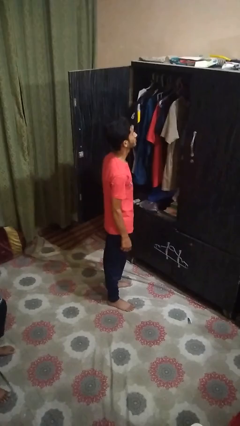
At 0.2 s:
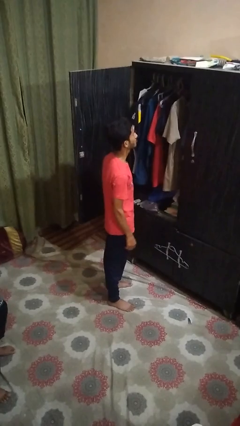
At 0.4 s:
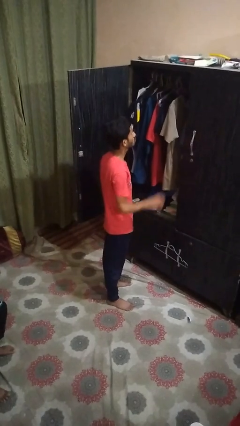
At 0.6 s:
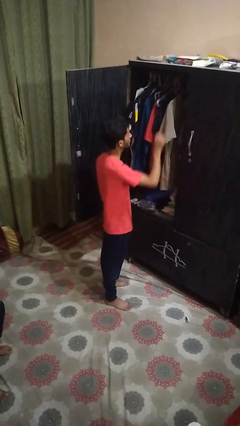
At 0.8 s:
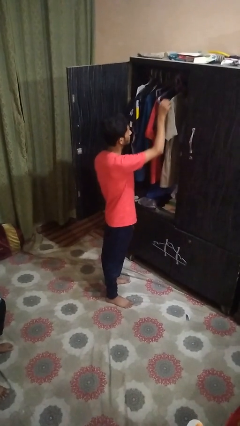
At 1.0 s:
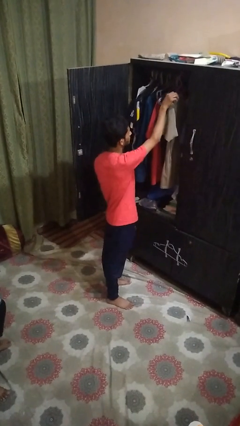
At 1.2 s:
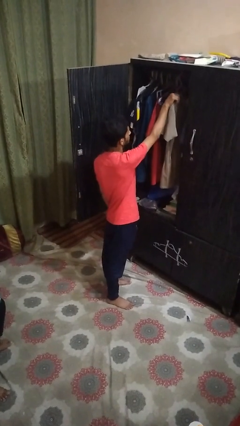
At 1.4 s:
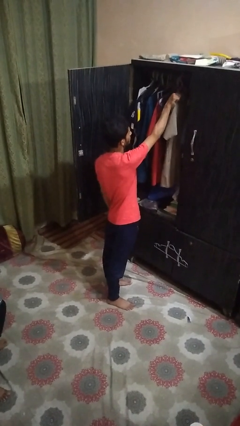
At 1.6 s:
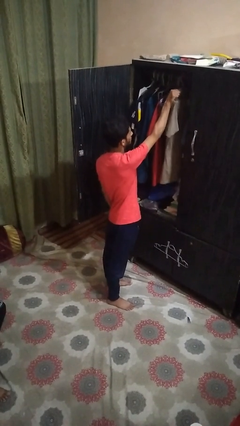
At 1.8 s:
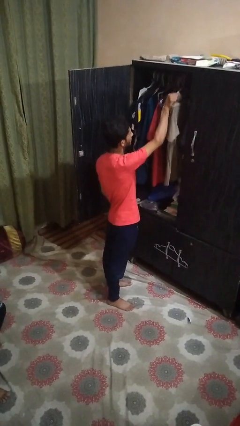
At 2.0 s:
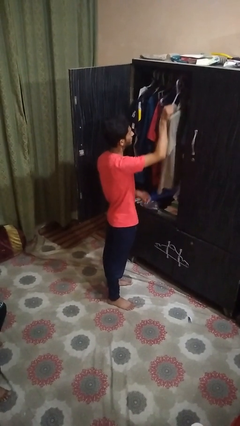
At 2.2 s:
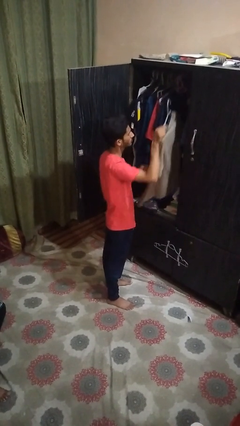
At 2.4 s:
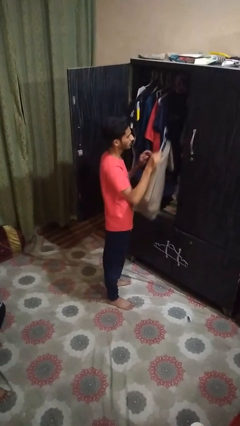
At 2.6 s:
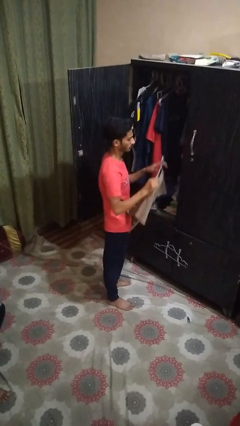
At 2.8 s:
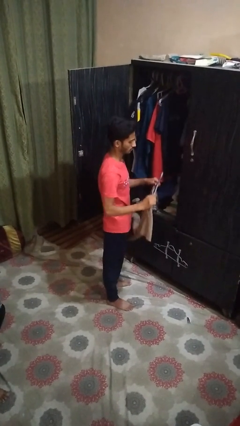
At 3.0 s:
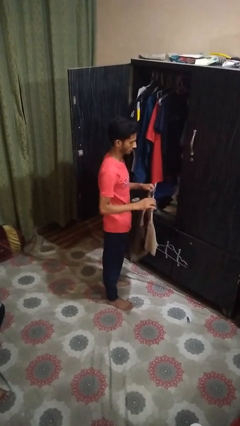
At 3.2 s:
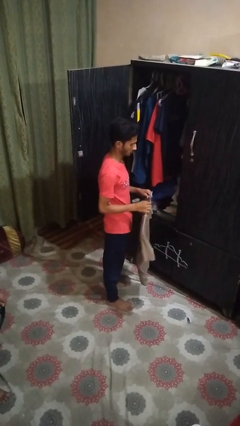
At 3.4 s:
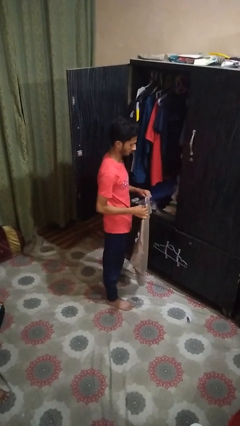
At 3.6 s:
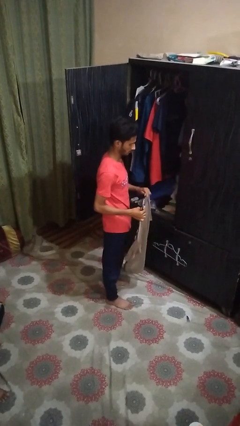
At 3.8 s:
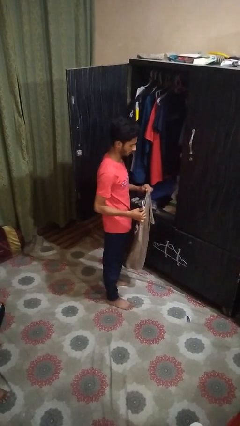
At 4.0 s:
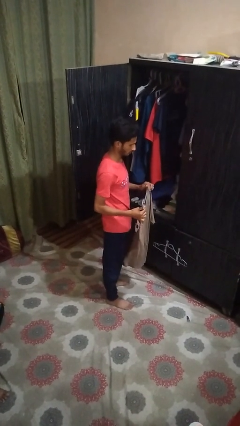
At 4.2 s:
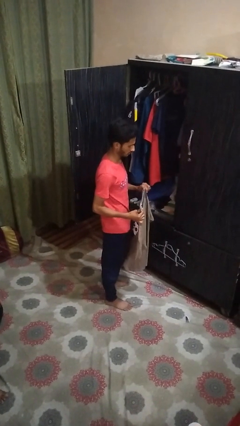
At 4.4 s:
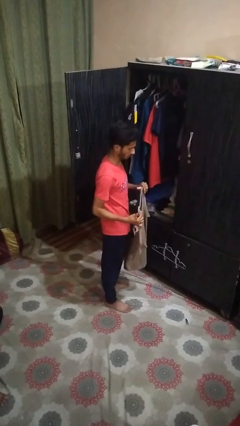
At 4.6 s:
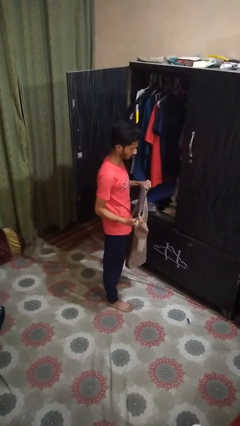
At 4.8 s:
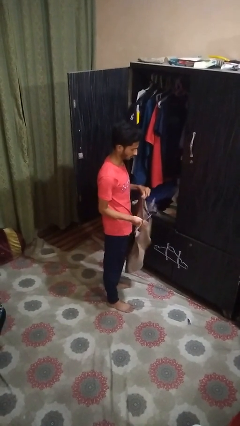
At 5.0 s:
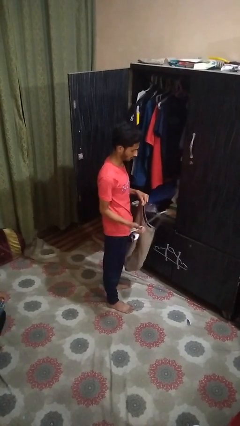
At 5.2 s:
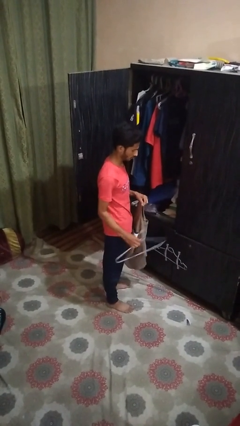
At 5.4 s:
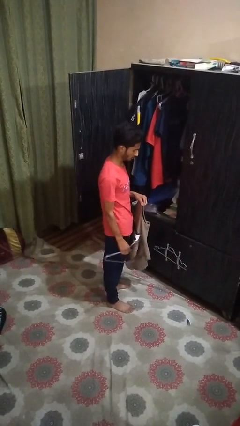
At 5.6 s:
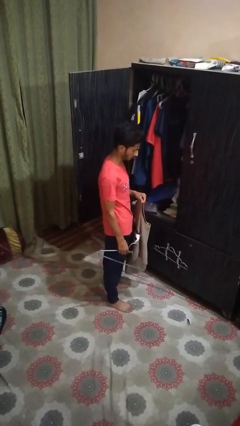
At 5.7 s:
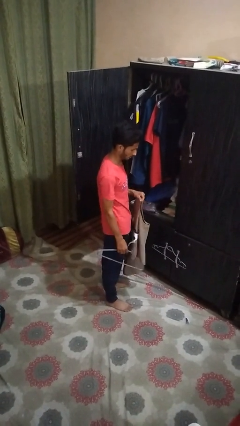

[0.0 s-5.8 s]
person takes clothes from closet

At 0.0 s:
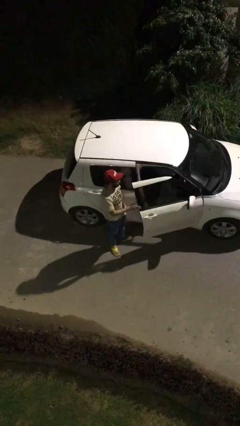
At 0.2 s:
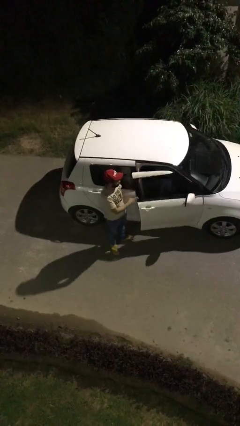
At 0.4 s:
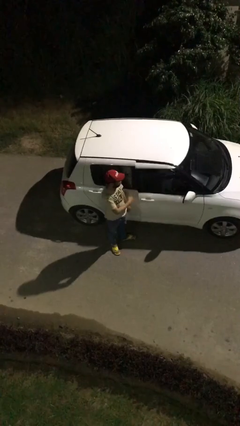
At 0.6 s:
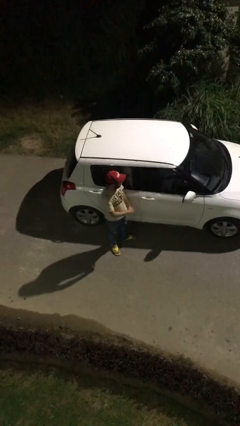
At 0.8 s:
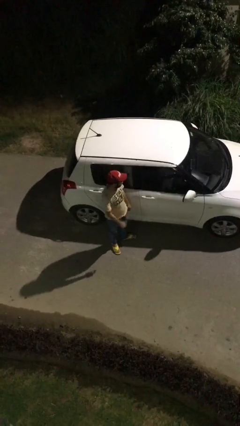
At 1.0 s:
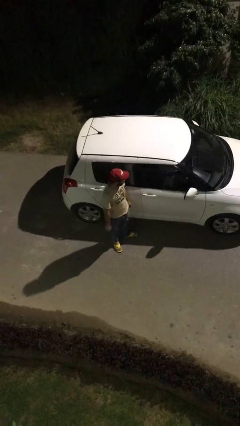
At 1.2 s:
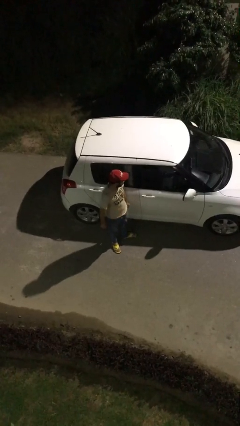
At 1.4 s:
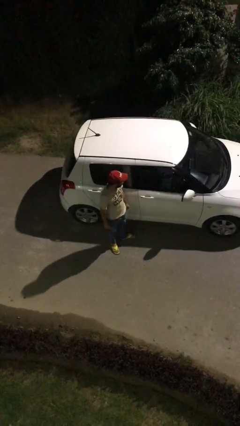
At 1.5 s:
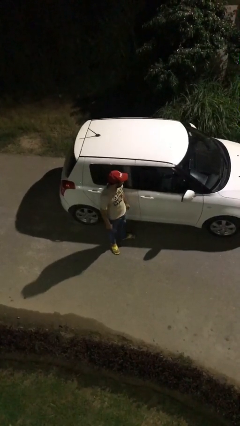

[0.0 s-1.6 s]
person closes car door

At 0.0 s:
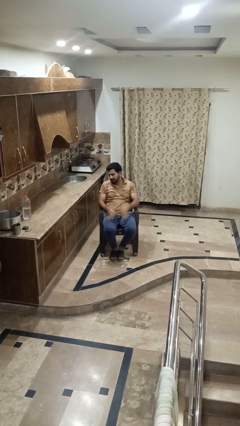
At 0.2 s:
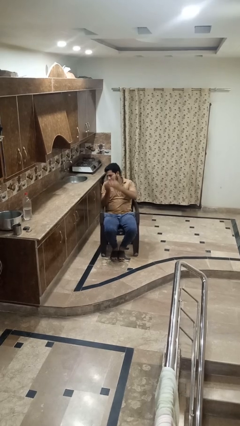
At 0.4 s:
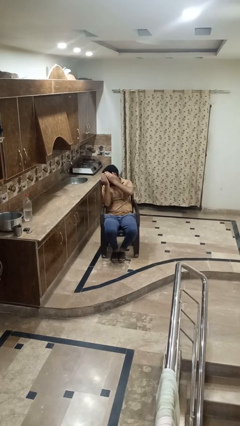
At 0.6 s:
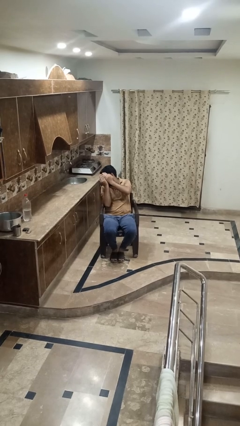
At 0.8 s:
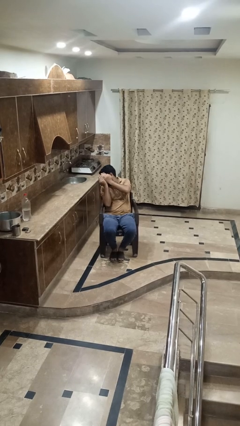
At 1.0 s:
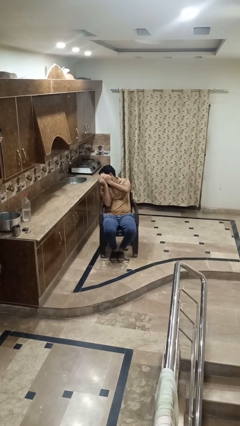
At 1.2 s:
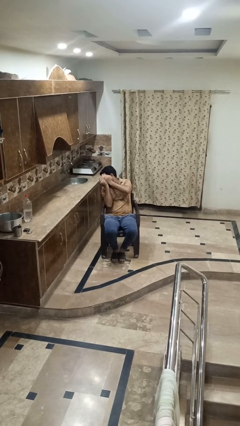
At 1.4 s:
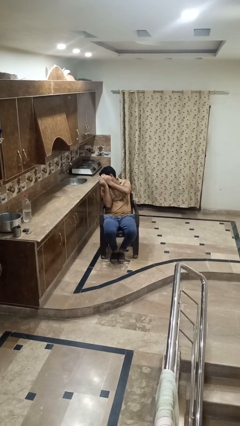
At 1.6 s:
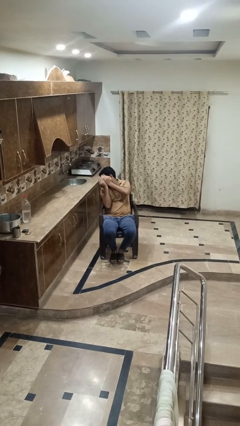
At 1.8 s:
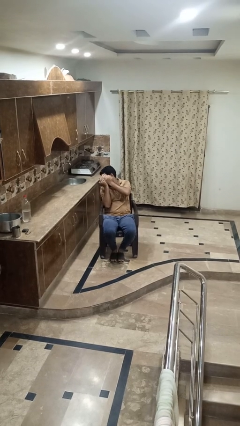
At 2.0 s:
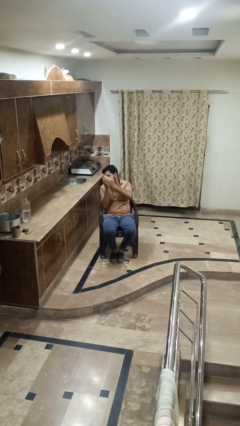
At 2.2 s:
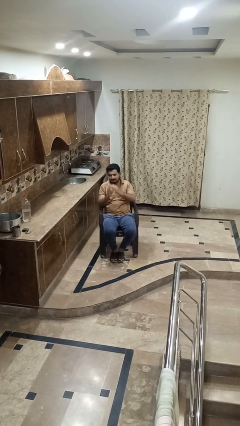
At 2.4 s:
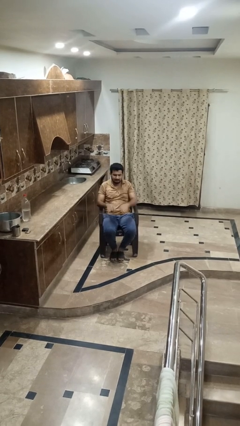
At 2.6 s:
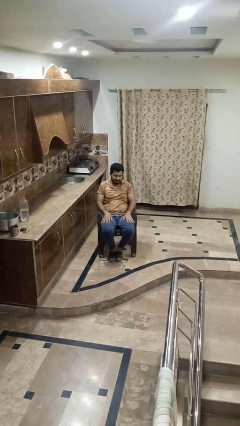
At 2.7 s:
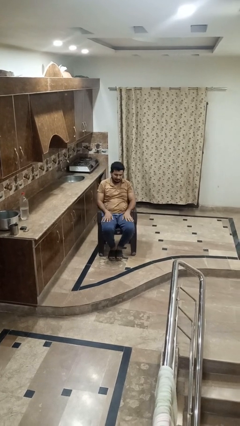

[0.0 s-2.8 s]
person covers face with hands

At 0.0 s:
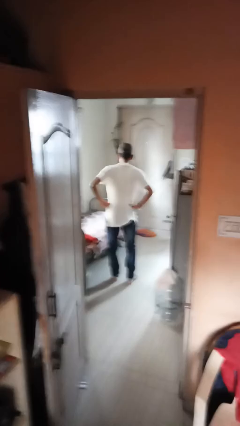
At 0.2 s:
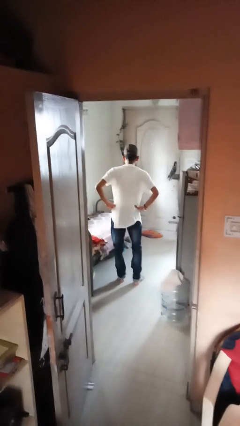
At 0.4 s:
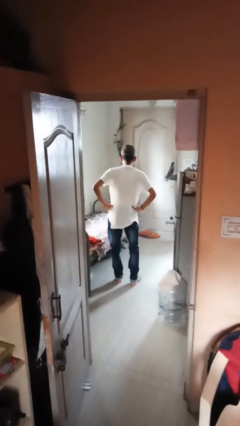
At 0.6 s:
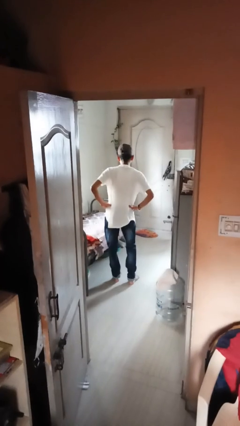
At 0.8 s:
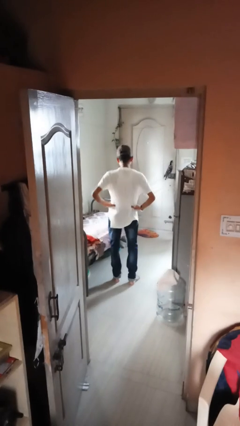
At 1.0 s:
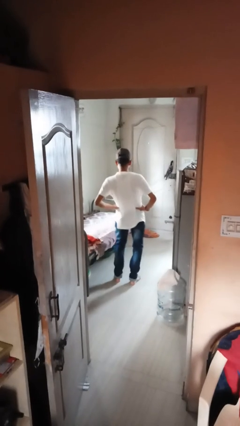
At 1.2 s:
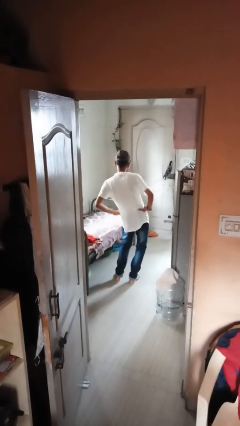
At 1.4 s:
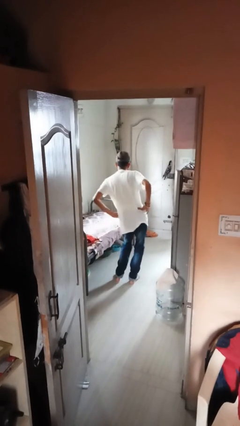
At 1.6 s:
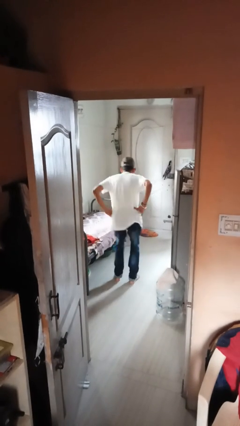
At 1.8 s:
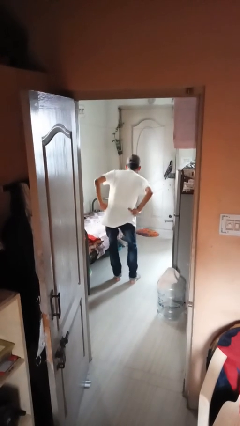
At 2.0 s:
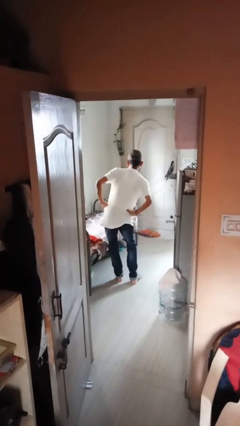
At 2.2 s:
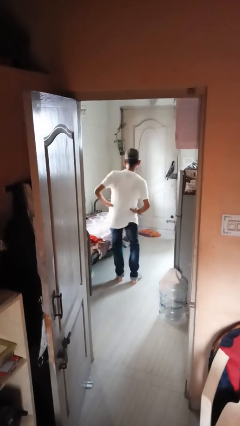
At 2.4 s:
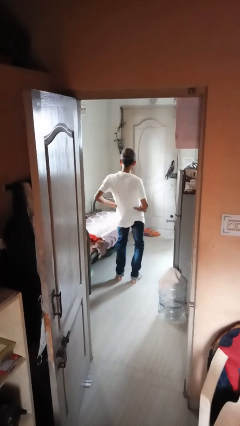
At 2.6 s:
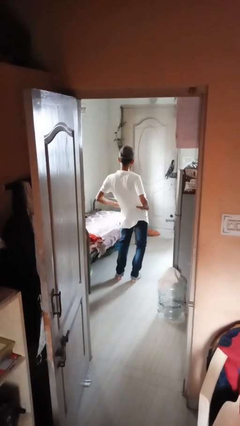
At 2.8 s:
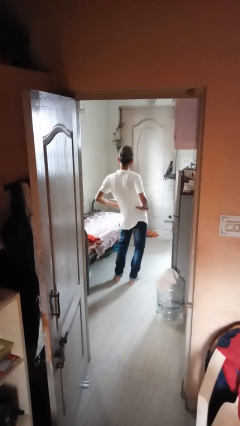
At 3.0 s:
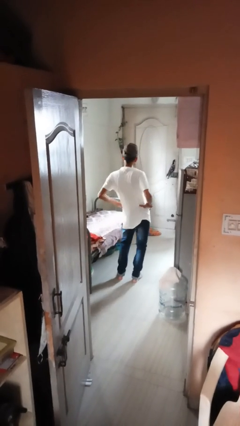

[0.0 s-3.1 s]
person wiggles hips

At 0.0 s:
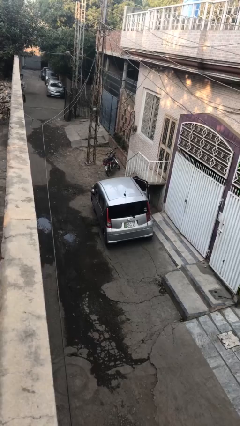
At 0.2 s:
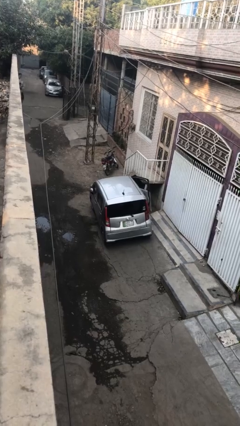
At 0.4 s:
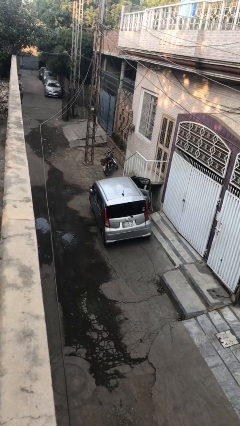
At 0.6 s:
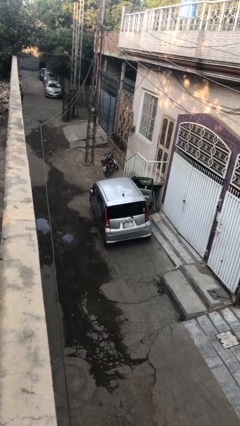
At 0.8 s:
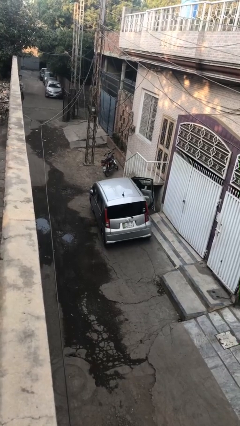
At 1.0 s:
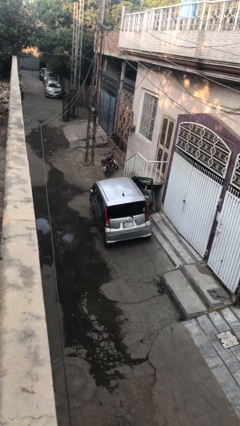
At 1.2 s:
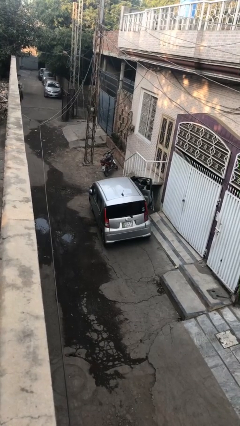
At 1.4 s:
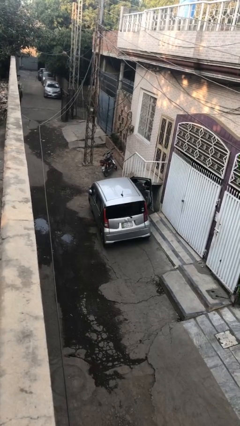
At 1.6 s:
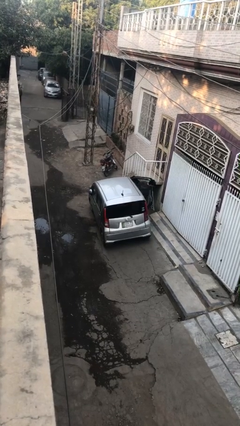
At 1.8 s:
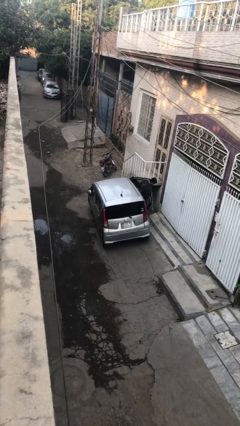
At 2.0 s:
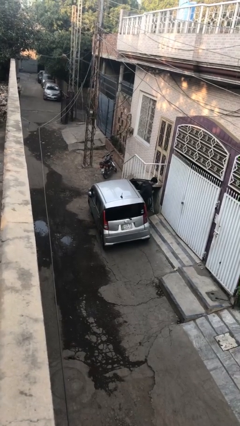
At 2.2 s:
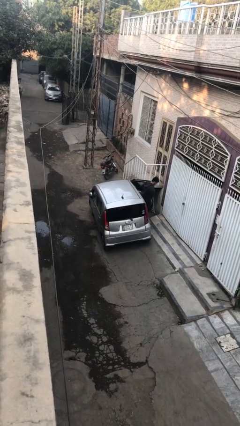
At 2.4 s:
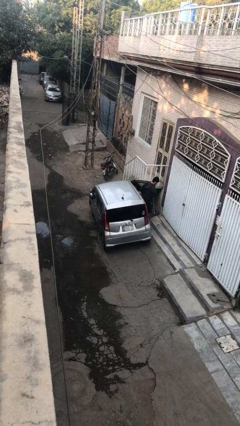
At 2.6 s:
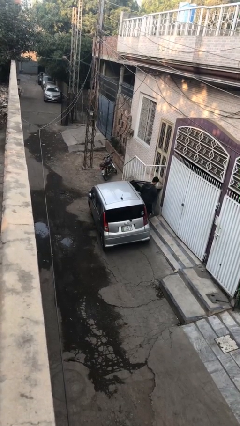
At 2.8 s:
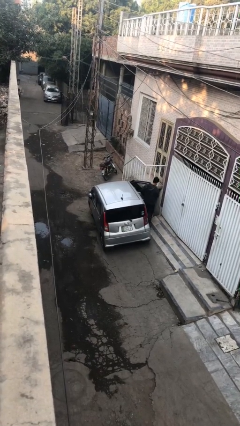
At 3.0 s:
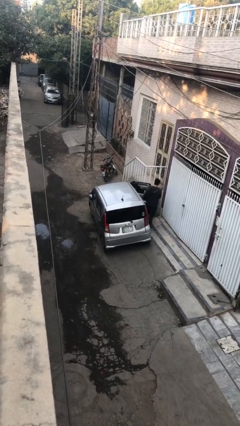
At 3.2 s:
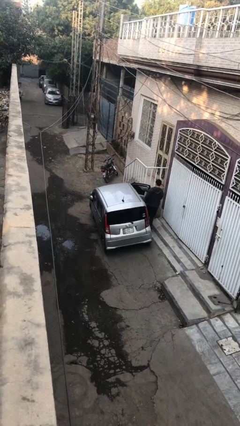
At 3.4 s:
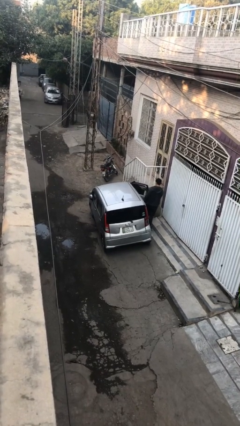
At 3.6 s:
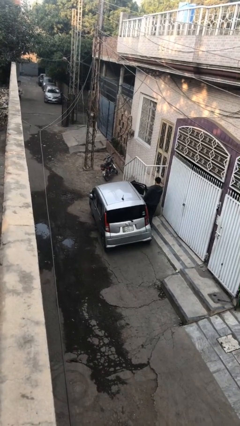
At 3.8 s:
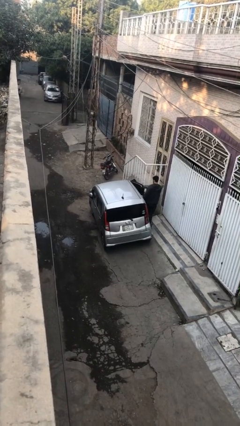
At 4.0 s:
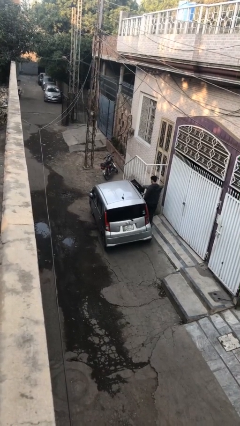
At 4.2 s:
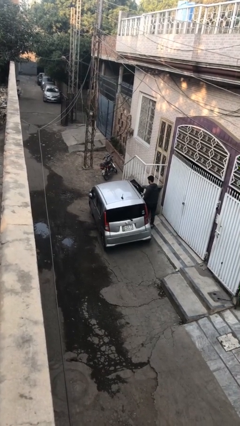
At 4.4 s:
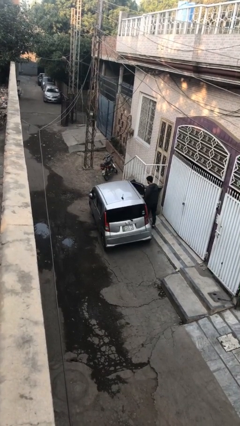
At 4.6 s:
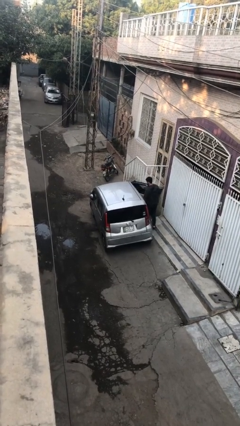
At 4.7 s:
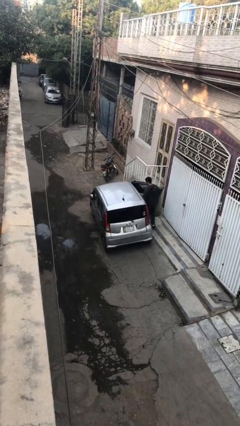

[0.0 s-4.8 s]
car drops off person
